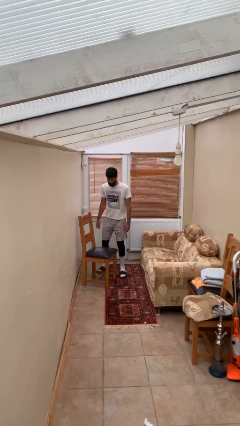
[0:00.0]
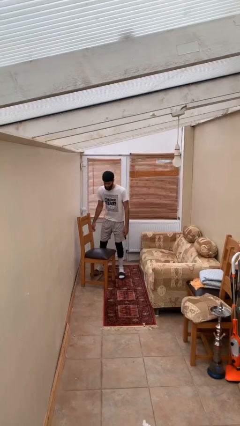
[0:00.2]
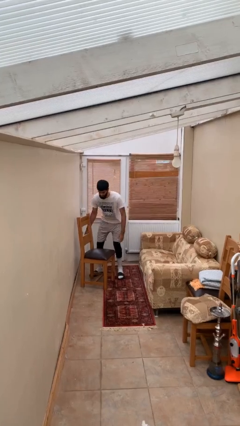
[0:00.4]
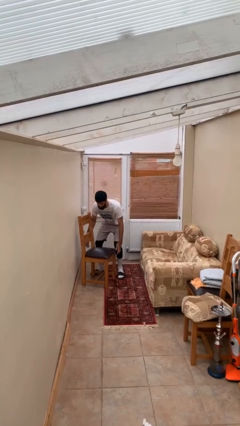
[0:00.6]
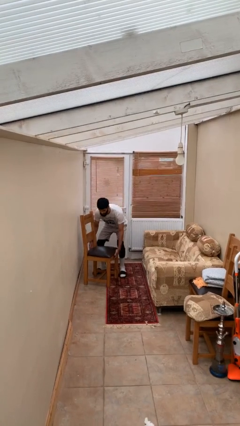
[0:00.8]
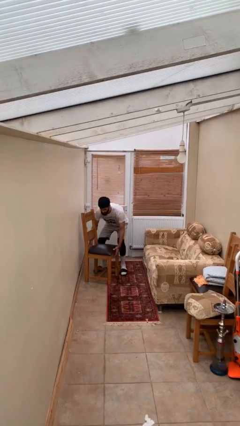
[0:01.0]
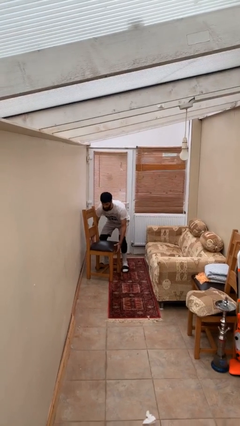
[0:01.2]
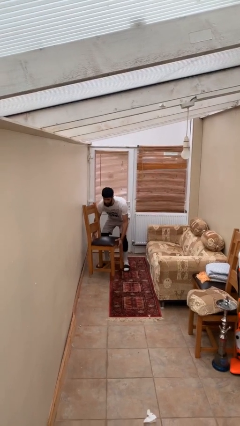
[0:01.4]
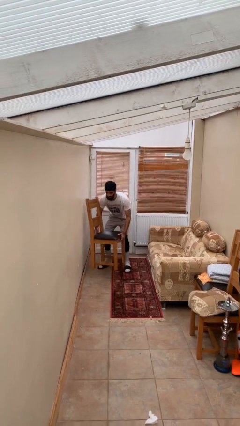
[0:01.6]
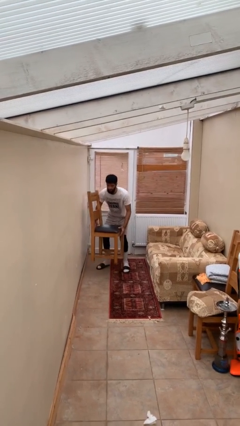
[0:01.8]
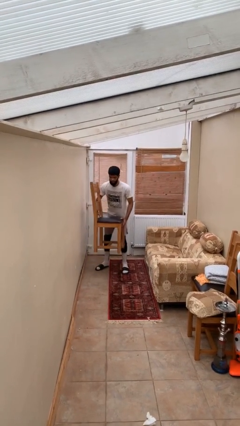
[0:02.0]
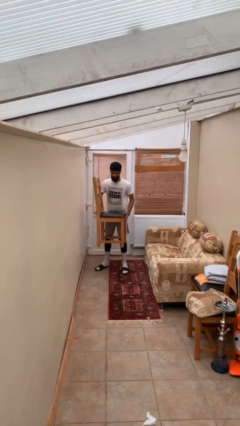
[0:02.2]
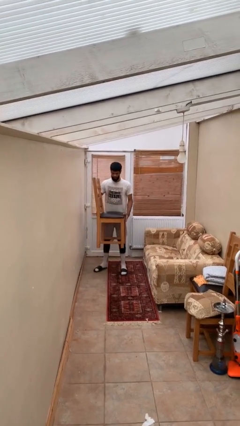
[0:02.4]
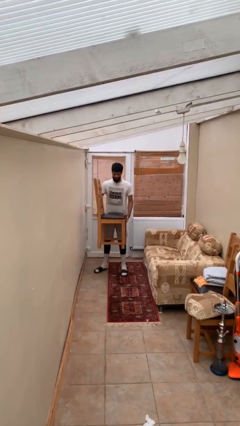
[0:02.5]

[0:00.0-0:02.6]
person picks up object from floor

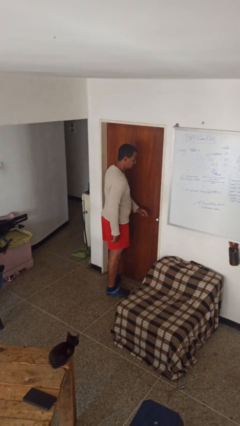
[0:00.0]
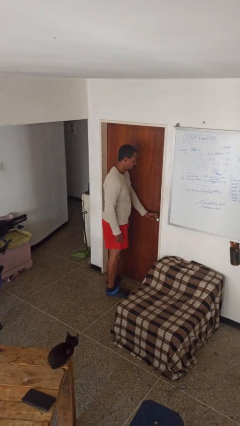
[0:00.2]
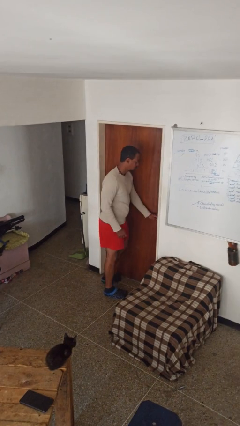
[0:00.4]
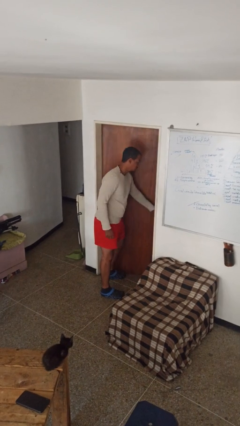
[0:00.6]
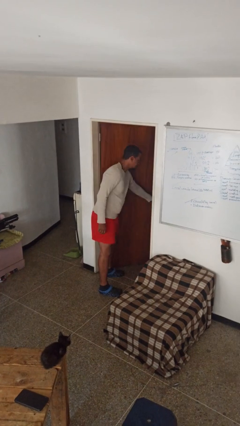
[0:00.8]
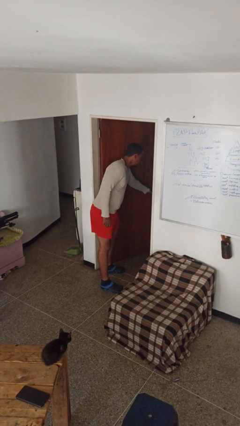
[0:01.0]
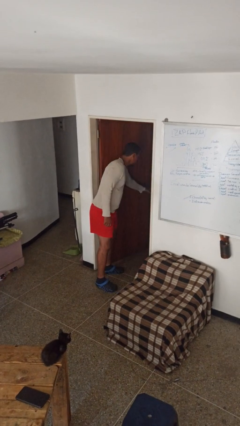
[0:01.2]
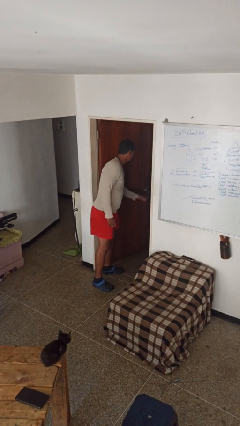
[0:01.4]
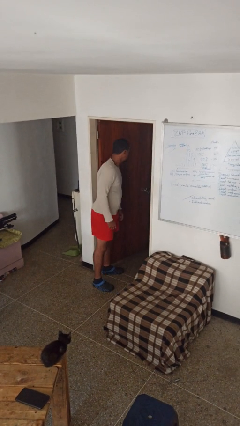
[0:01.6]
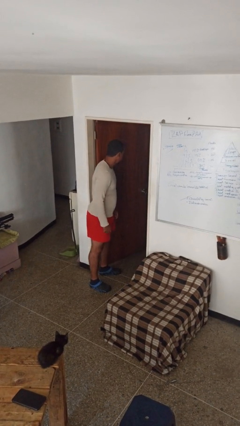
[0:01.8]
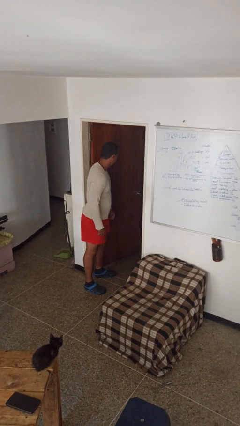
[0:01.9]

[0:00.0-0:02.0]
person opens facility door

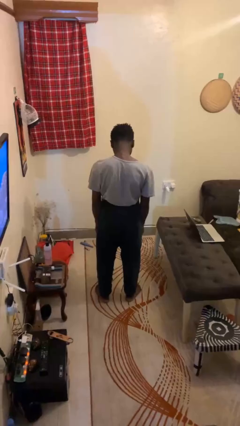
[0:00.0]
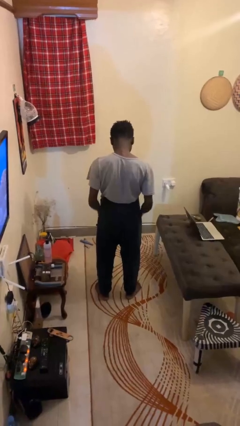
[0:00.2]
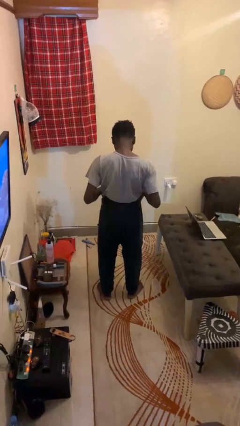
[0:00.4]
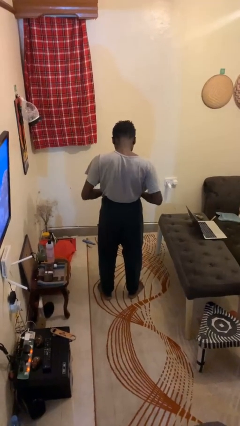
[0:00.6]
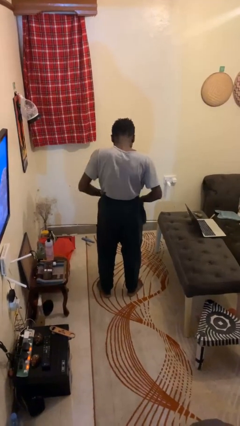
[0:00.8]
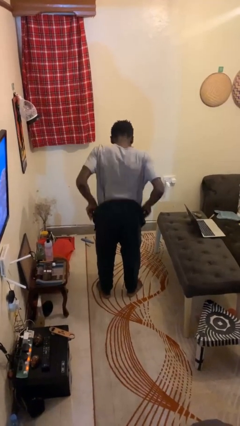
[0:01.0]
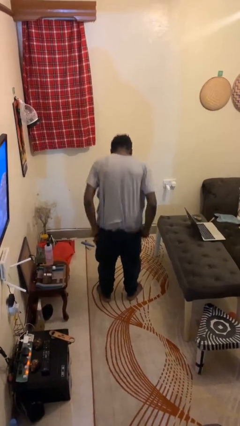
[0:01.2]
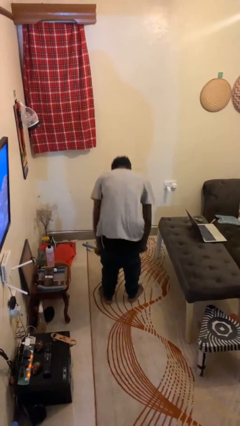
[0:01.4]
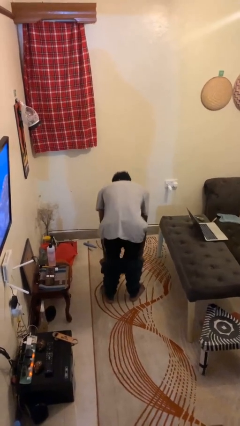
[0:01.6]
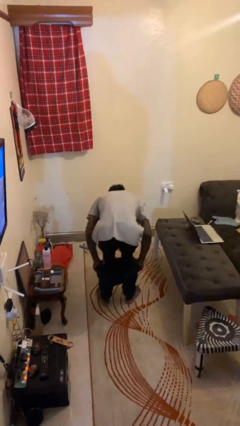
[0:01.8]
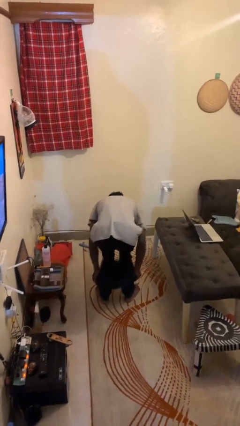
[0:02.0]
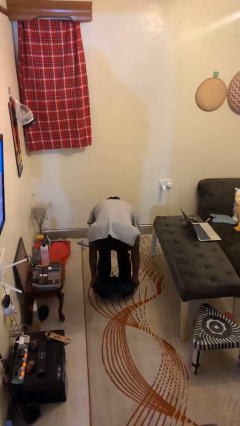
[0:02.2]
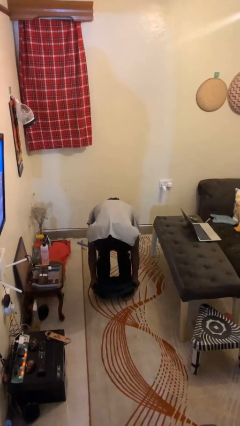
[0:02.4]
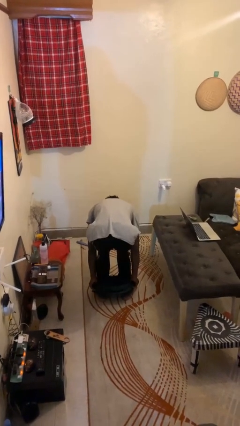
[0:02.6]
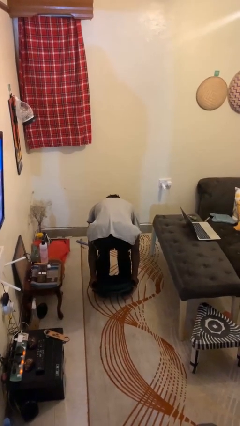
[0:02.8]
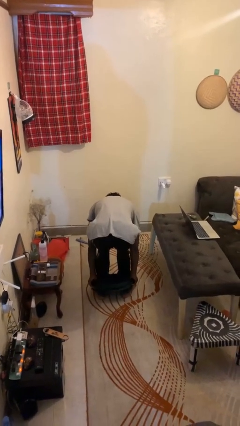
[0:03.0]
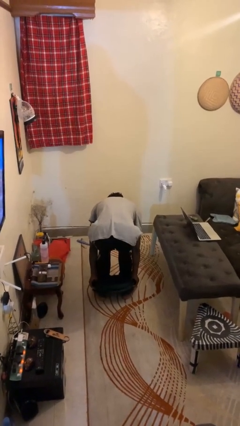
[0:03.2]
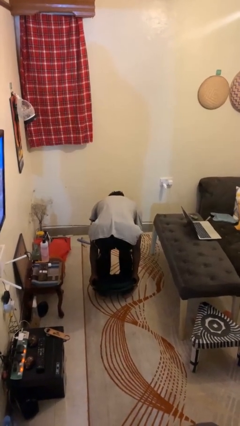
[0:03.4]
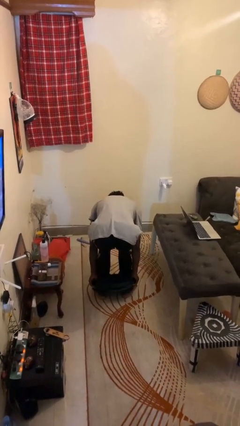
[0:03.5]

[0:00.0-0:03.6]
person takes off pants

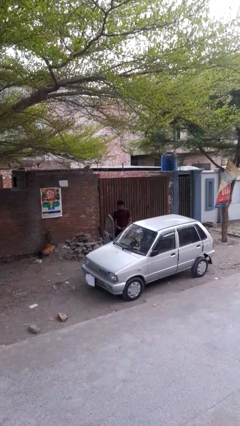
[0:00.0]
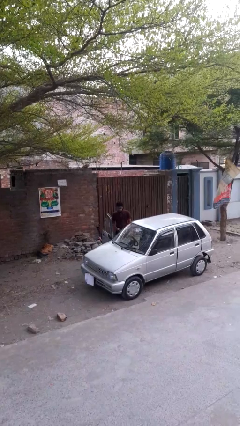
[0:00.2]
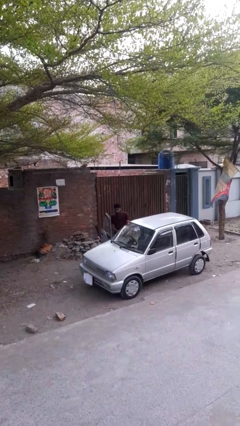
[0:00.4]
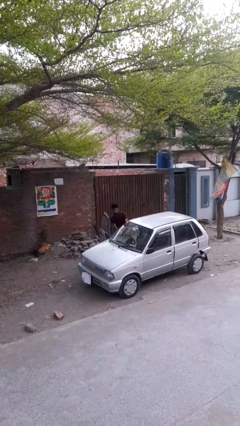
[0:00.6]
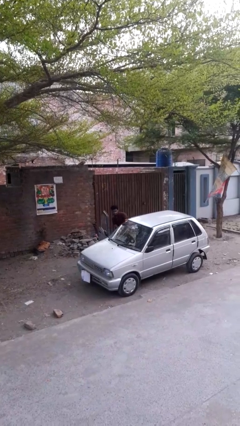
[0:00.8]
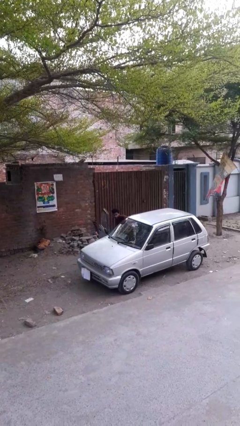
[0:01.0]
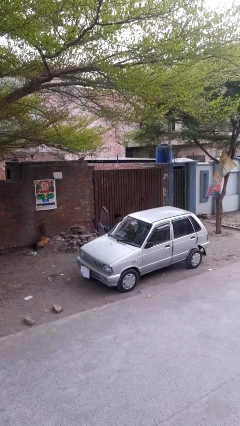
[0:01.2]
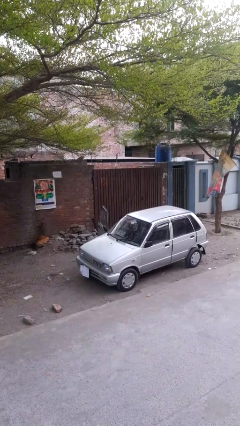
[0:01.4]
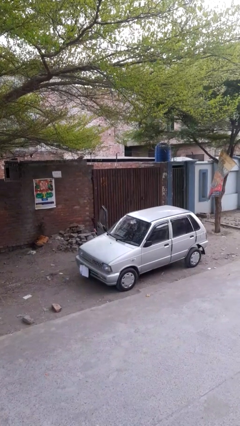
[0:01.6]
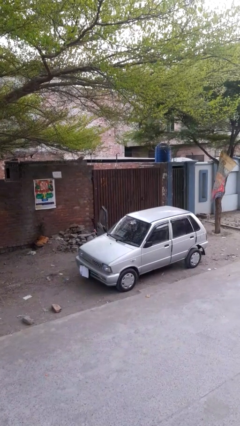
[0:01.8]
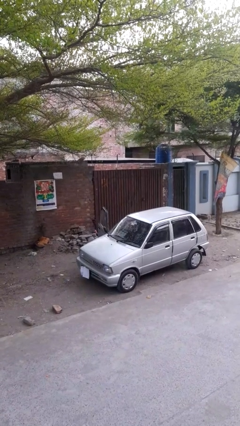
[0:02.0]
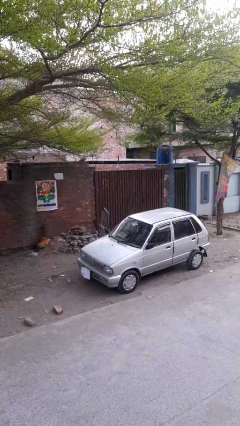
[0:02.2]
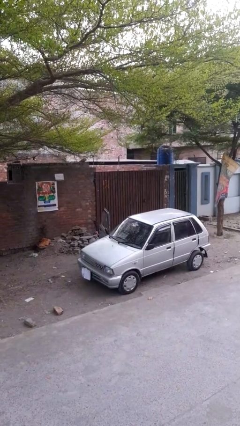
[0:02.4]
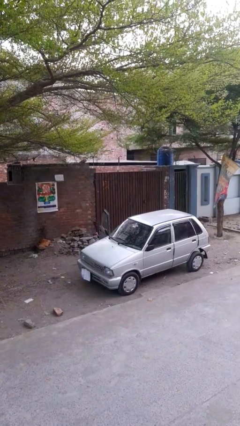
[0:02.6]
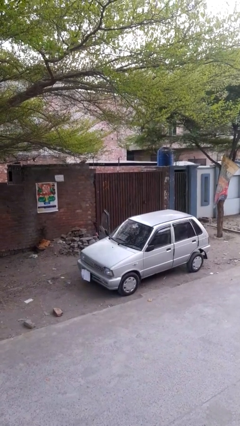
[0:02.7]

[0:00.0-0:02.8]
person enters car

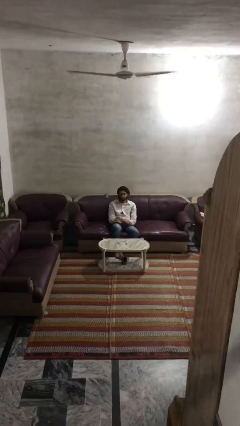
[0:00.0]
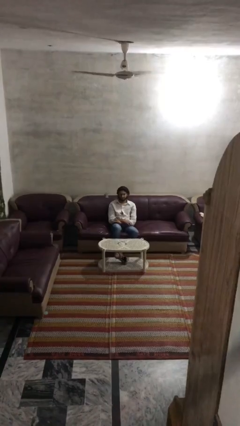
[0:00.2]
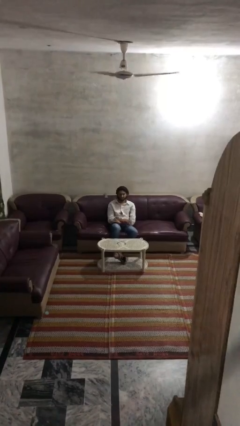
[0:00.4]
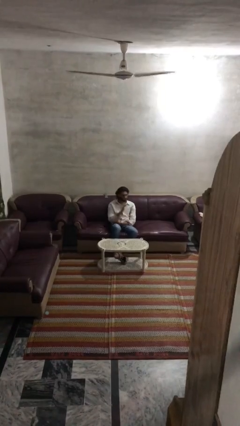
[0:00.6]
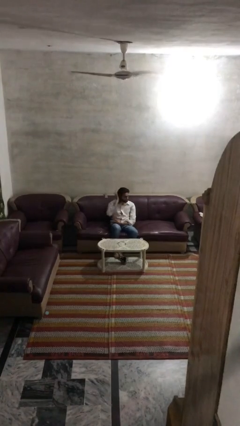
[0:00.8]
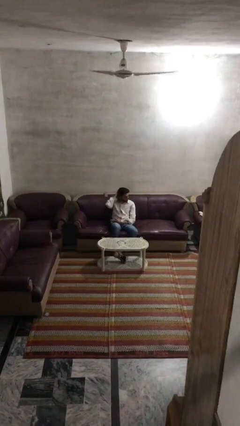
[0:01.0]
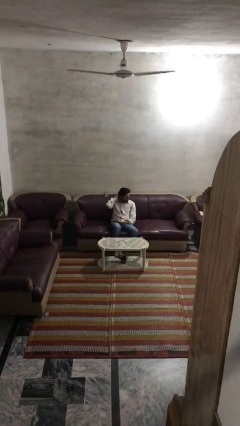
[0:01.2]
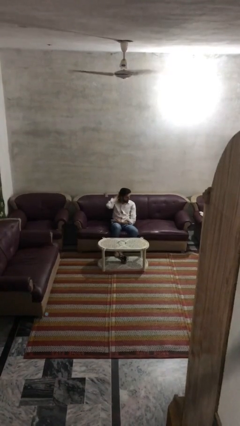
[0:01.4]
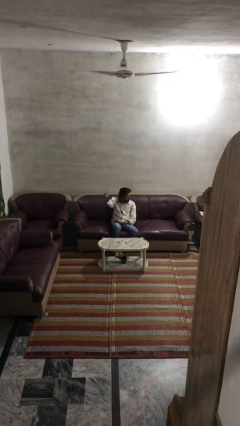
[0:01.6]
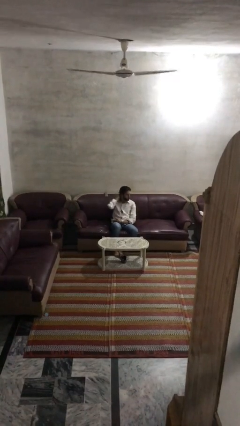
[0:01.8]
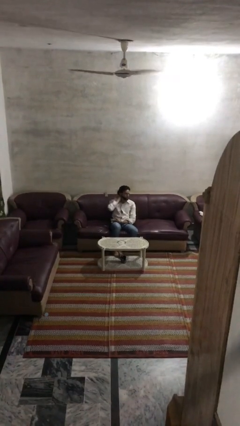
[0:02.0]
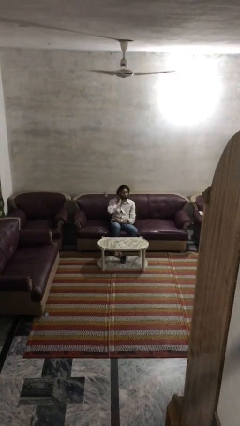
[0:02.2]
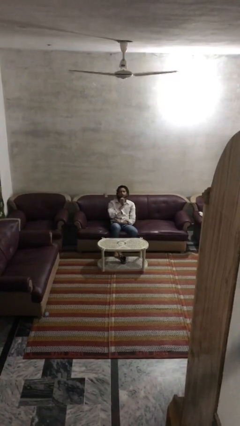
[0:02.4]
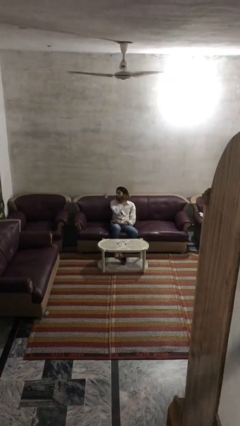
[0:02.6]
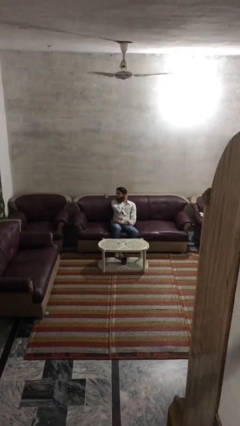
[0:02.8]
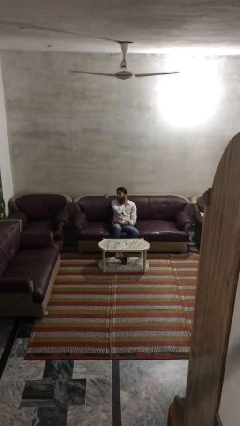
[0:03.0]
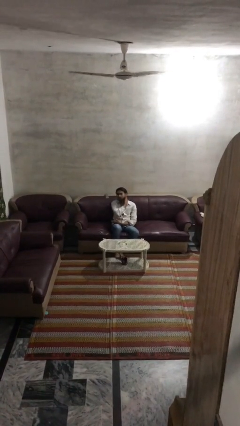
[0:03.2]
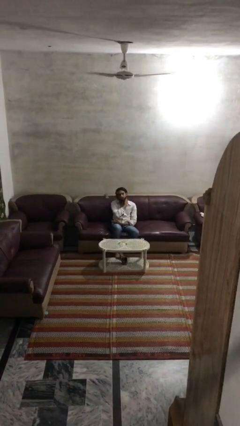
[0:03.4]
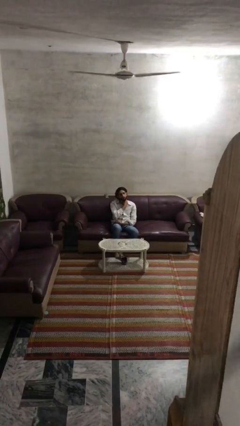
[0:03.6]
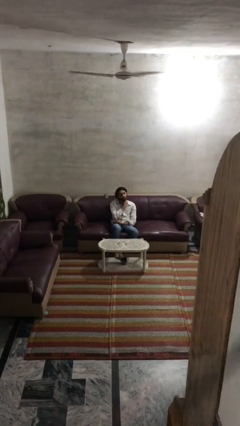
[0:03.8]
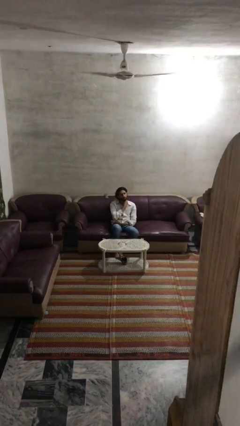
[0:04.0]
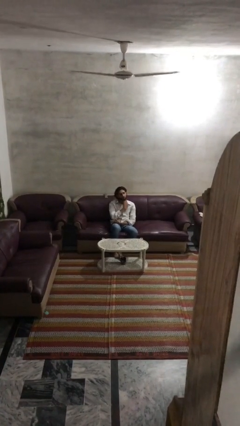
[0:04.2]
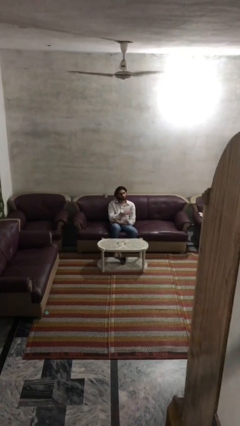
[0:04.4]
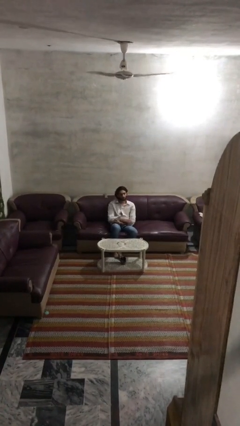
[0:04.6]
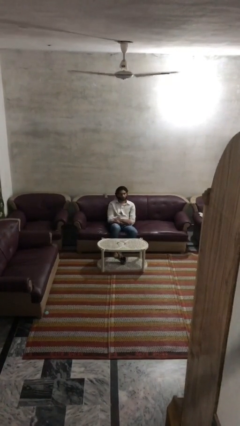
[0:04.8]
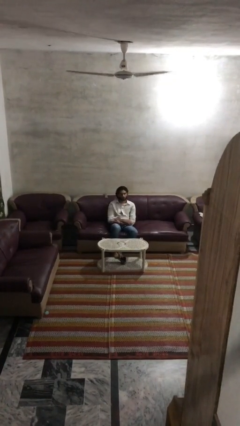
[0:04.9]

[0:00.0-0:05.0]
person strokes hair

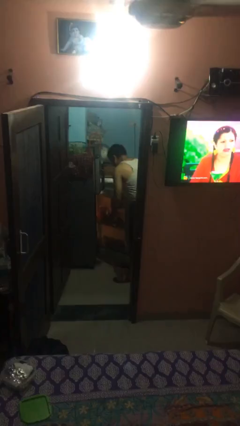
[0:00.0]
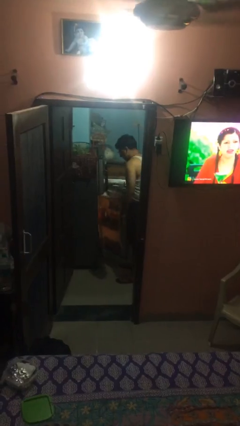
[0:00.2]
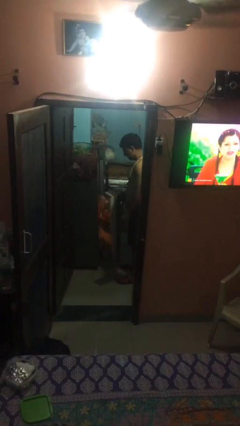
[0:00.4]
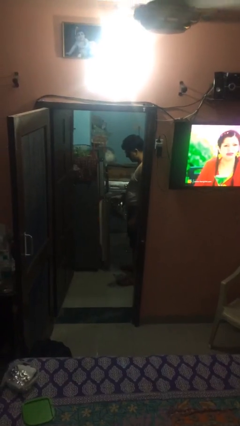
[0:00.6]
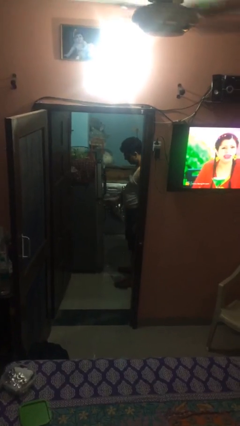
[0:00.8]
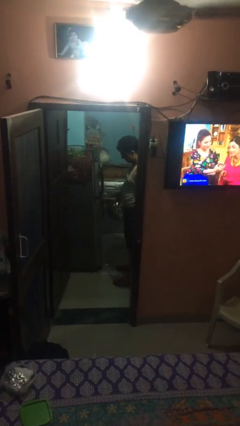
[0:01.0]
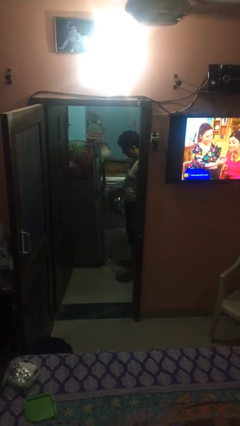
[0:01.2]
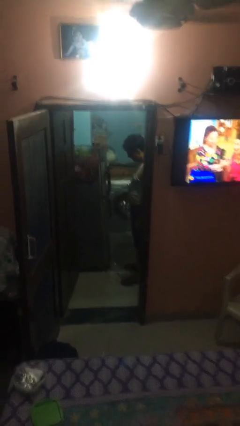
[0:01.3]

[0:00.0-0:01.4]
person closes refrigerator
